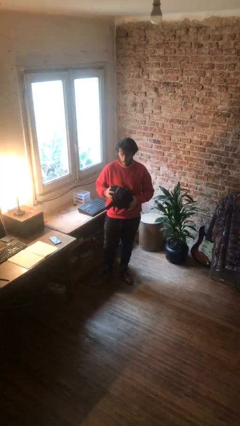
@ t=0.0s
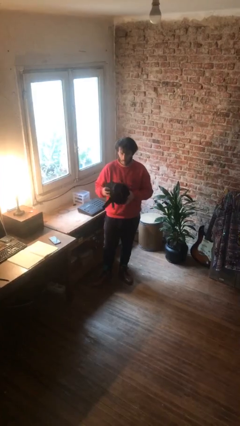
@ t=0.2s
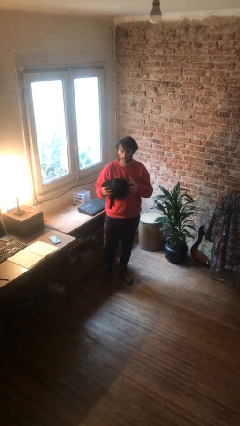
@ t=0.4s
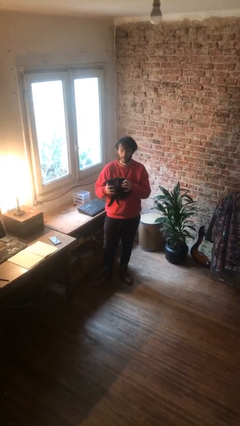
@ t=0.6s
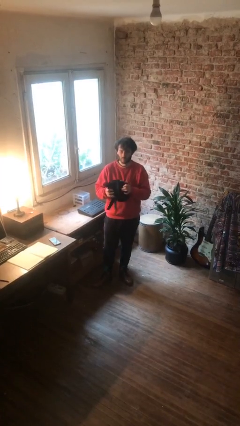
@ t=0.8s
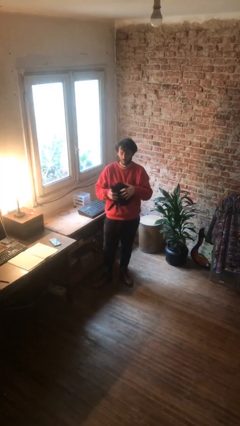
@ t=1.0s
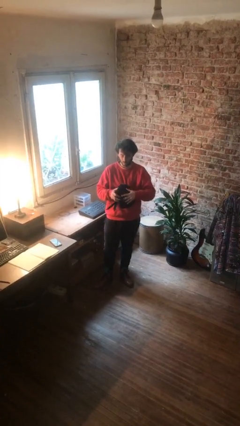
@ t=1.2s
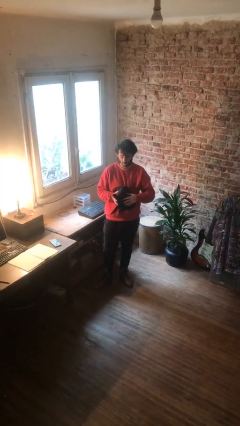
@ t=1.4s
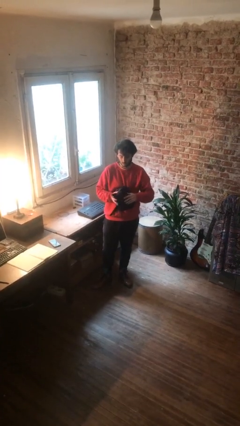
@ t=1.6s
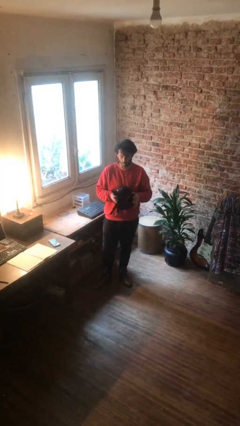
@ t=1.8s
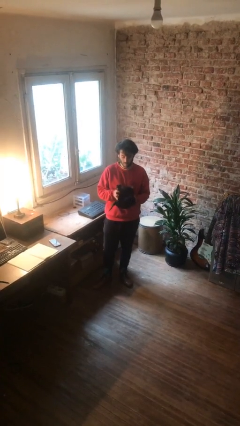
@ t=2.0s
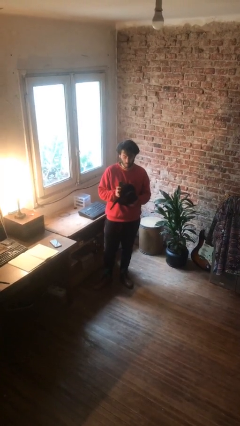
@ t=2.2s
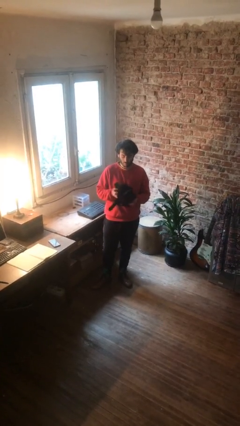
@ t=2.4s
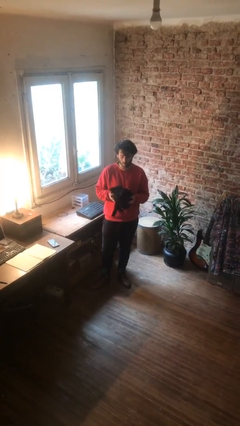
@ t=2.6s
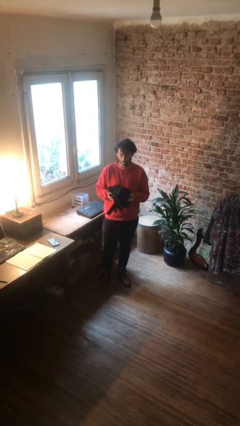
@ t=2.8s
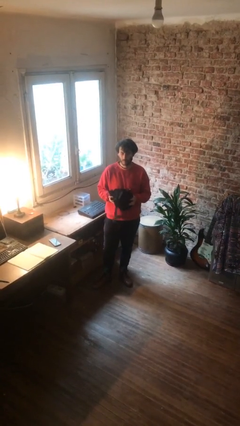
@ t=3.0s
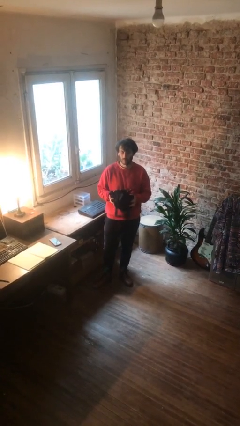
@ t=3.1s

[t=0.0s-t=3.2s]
person squeezes object

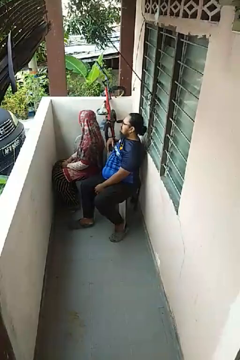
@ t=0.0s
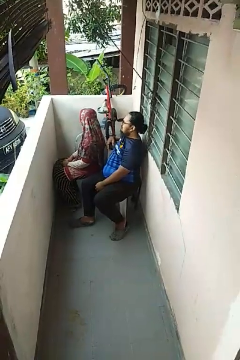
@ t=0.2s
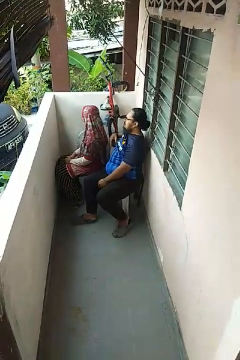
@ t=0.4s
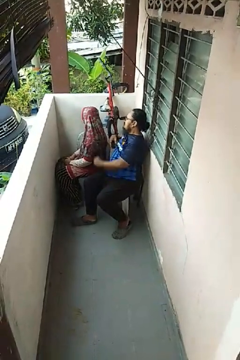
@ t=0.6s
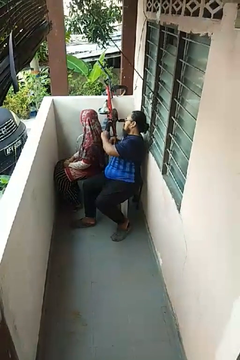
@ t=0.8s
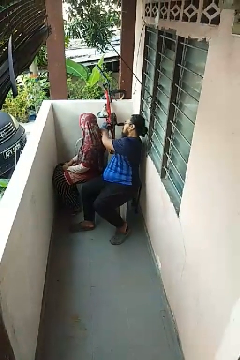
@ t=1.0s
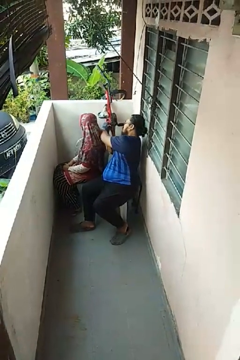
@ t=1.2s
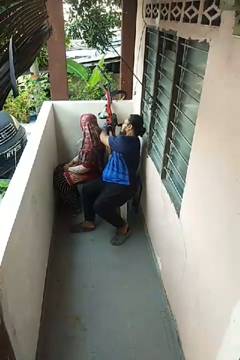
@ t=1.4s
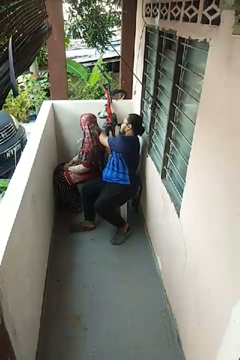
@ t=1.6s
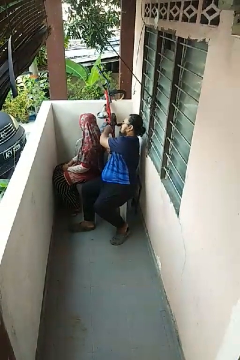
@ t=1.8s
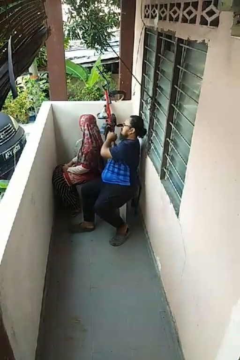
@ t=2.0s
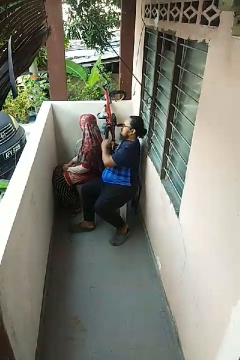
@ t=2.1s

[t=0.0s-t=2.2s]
person touches back of person

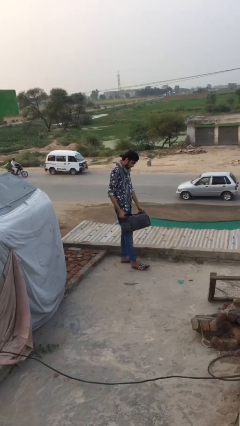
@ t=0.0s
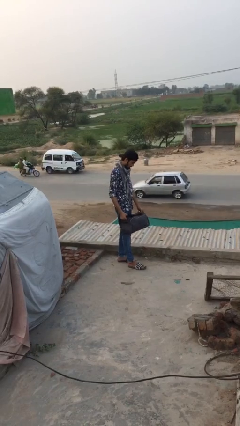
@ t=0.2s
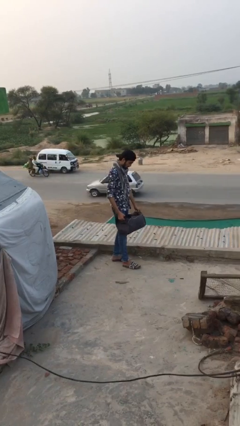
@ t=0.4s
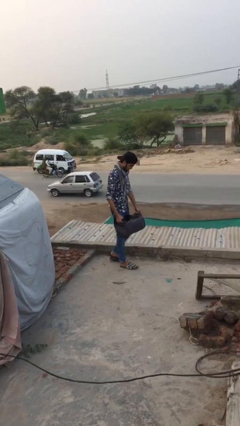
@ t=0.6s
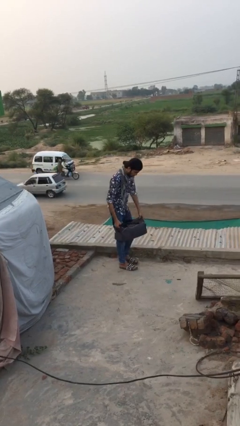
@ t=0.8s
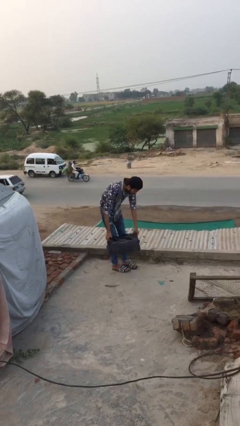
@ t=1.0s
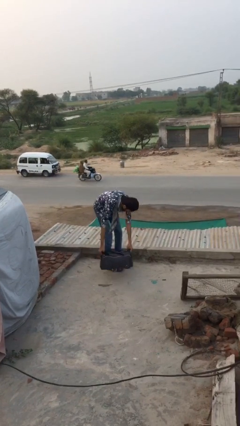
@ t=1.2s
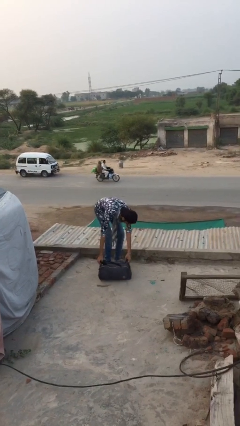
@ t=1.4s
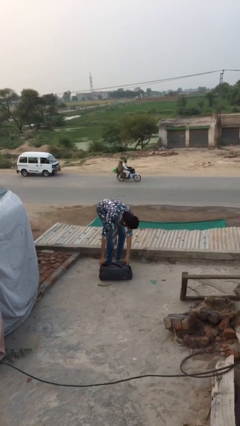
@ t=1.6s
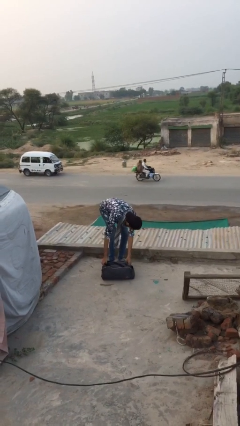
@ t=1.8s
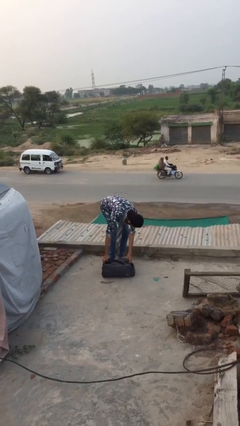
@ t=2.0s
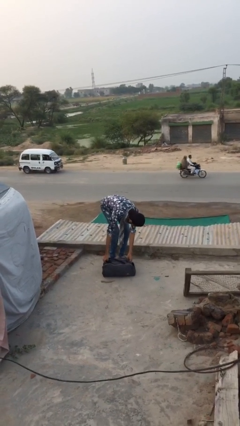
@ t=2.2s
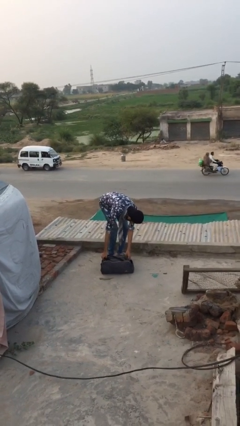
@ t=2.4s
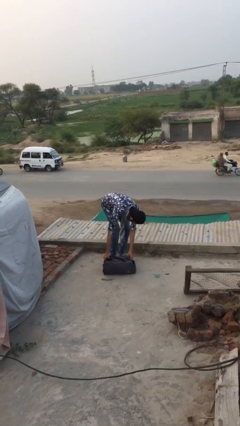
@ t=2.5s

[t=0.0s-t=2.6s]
person puts down object on floor

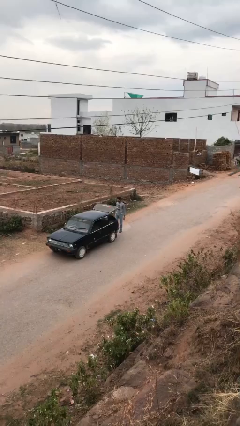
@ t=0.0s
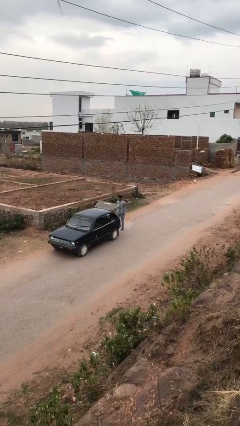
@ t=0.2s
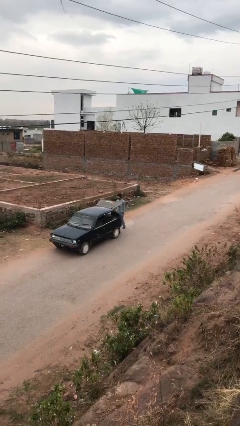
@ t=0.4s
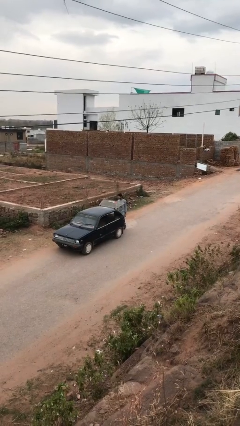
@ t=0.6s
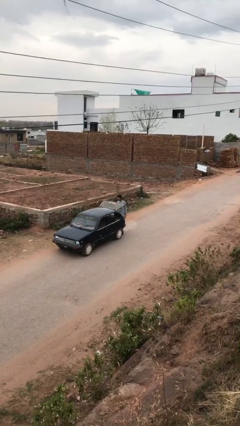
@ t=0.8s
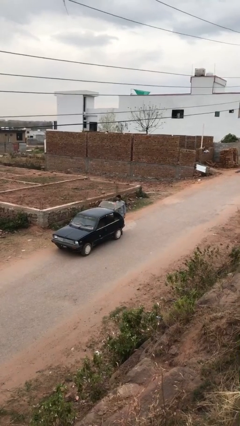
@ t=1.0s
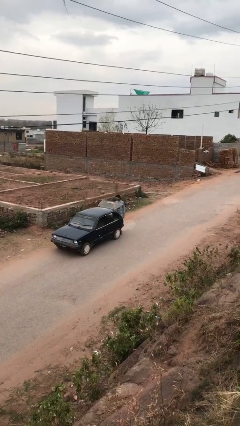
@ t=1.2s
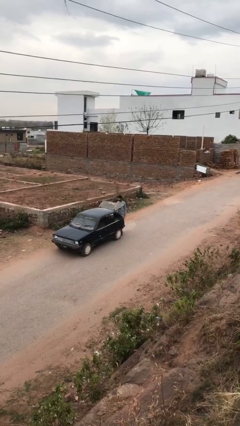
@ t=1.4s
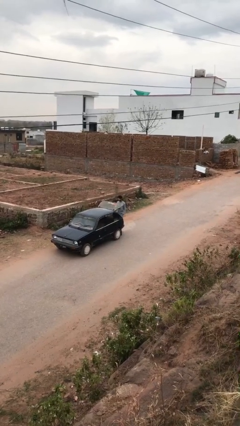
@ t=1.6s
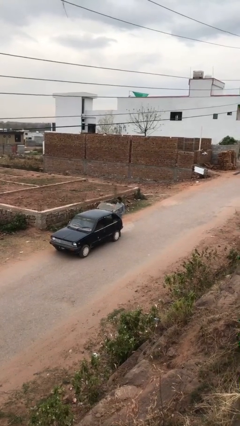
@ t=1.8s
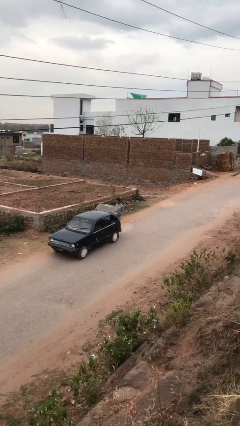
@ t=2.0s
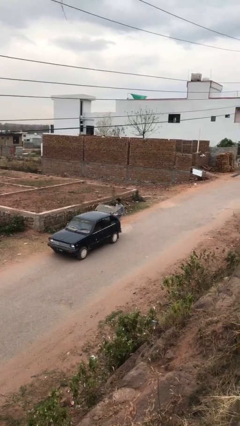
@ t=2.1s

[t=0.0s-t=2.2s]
person unloads car

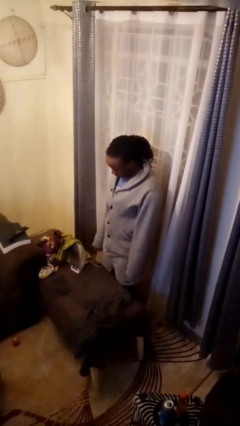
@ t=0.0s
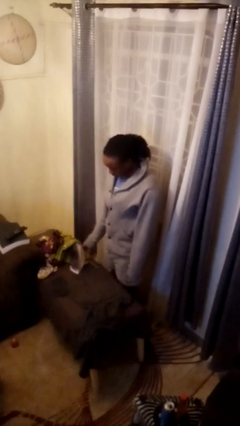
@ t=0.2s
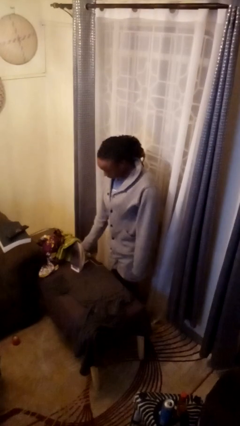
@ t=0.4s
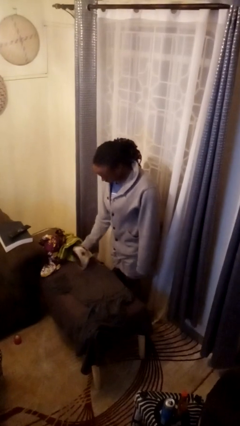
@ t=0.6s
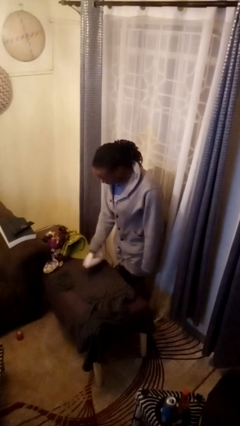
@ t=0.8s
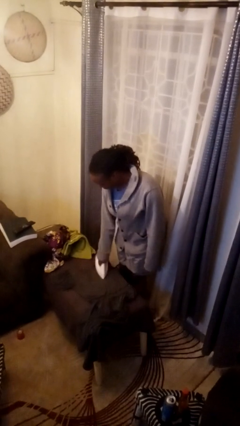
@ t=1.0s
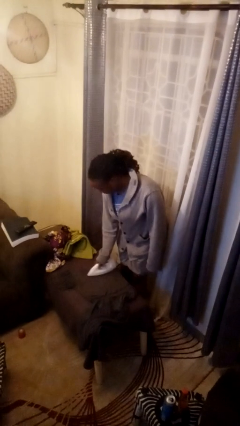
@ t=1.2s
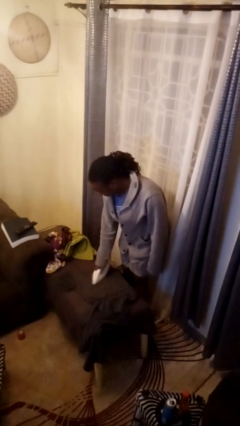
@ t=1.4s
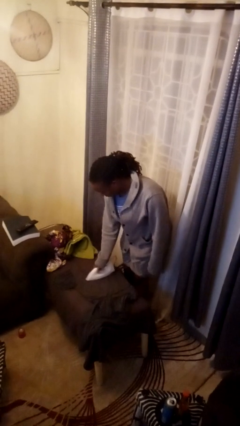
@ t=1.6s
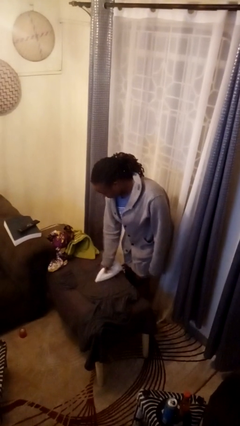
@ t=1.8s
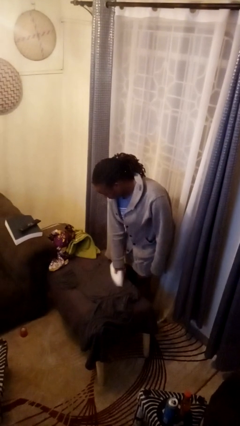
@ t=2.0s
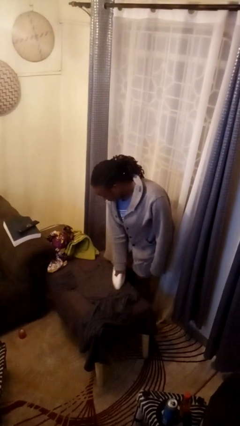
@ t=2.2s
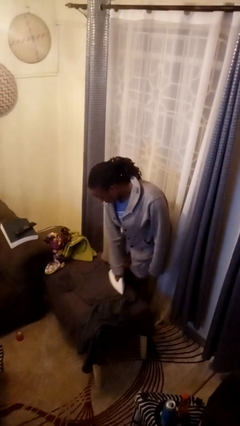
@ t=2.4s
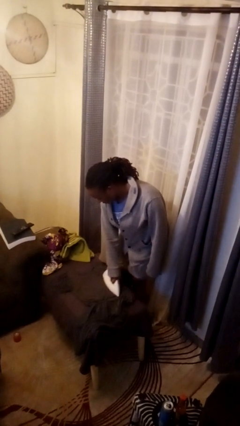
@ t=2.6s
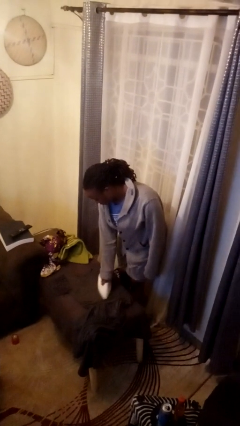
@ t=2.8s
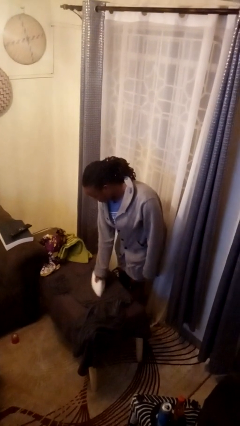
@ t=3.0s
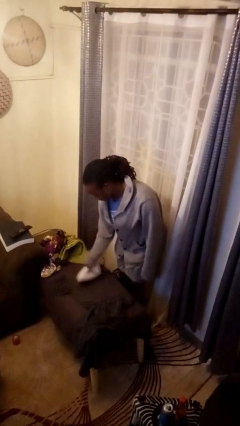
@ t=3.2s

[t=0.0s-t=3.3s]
person irons clothes

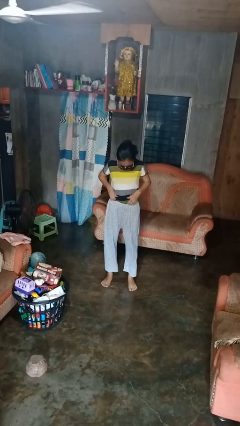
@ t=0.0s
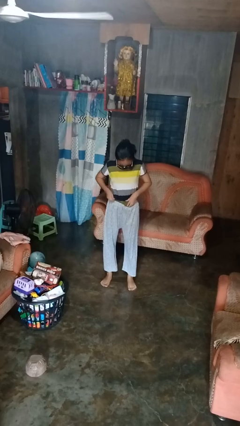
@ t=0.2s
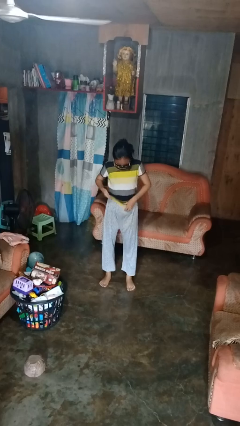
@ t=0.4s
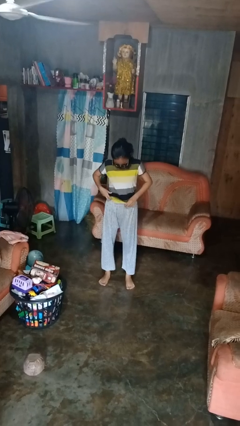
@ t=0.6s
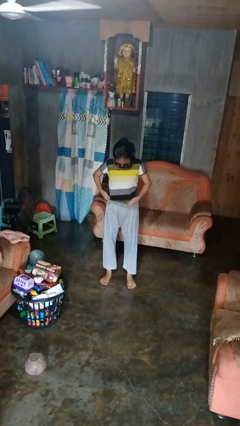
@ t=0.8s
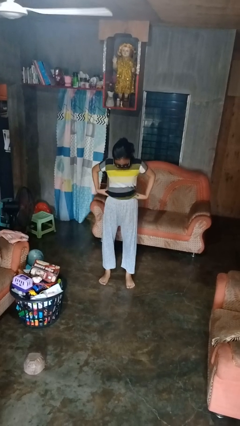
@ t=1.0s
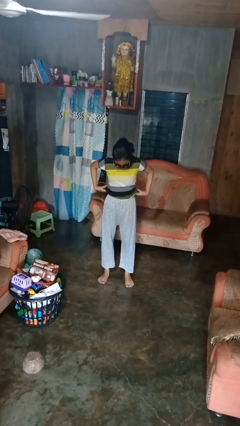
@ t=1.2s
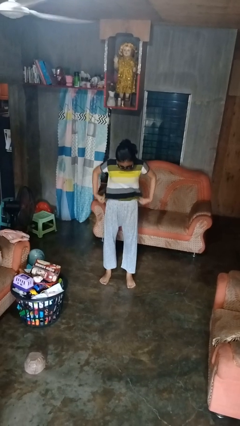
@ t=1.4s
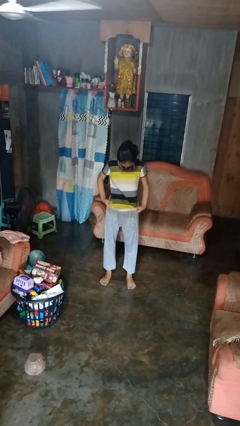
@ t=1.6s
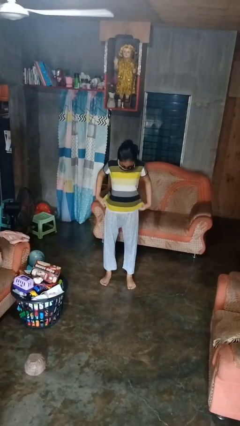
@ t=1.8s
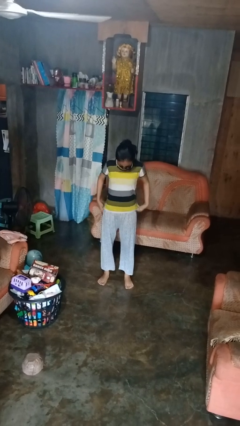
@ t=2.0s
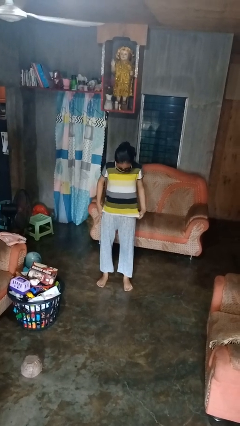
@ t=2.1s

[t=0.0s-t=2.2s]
person untucks shirt

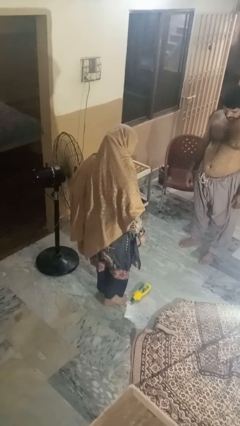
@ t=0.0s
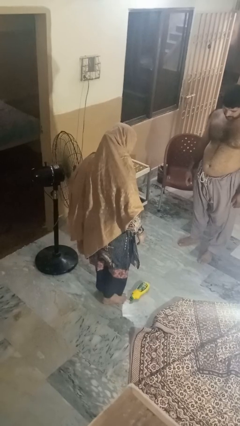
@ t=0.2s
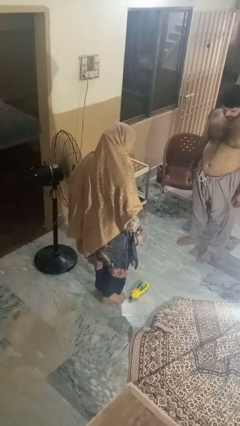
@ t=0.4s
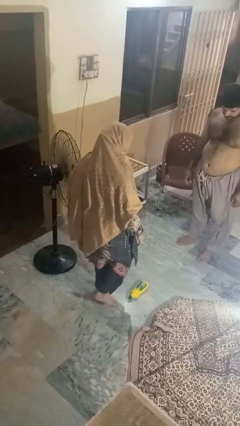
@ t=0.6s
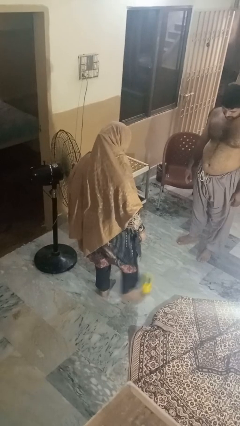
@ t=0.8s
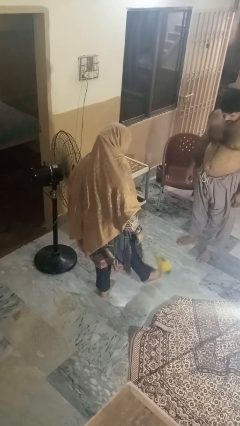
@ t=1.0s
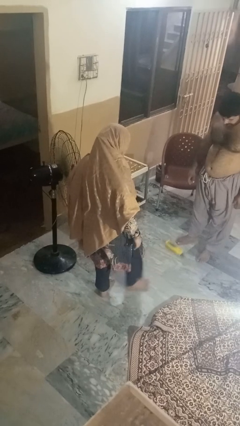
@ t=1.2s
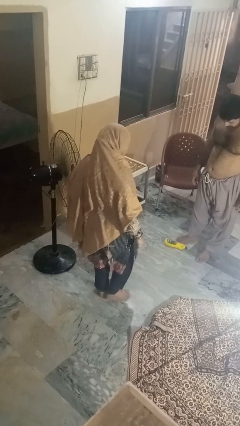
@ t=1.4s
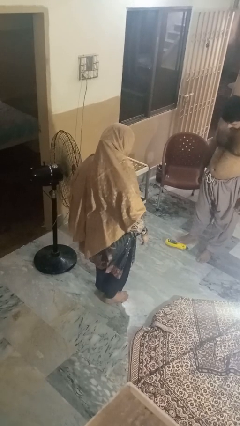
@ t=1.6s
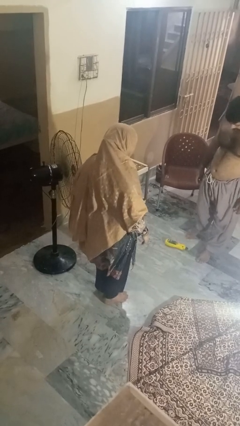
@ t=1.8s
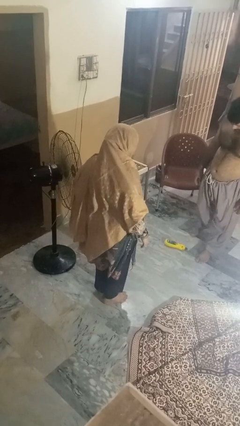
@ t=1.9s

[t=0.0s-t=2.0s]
person kicks object to person

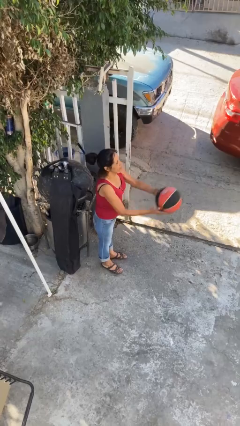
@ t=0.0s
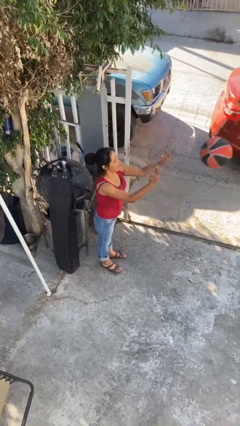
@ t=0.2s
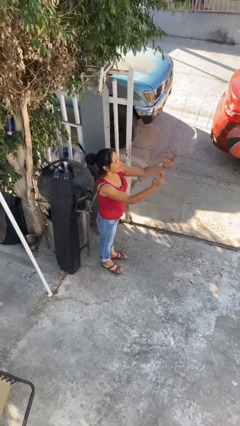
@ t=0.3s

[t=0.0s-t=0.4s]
person throws object to person
